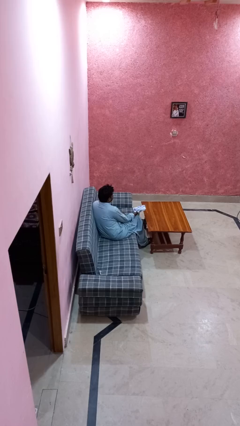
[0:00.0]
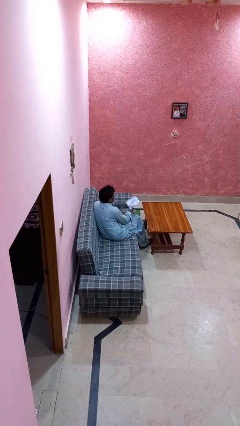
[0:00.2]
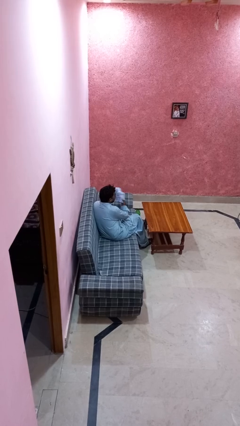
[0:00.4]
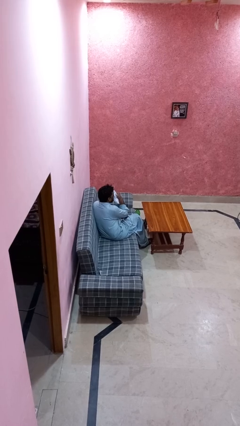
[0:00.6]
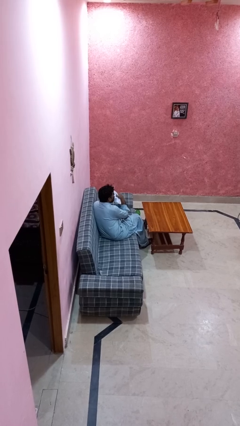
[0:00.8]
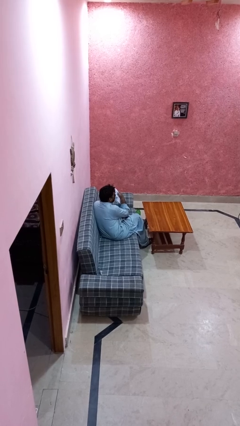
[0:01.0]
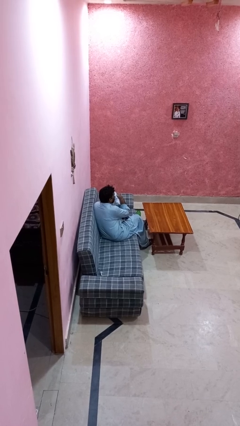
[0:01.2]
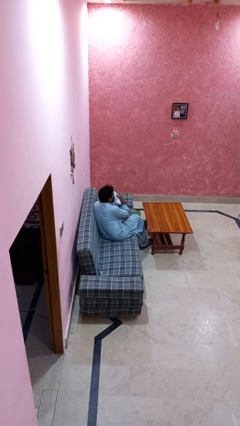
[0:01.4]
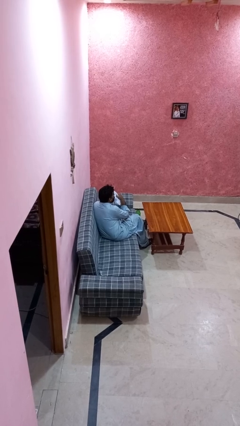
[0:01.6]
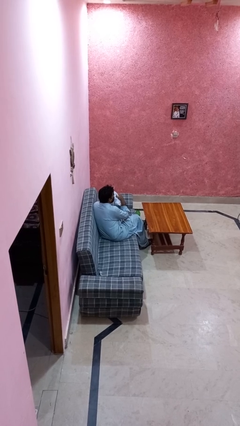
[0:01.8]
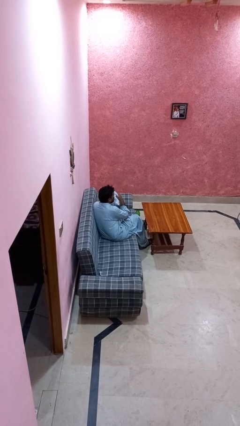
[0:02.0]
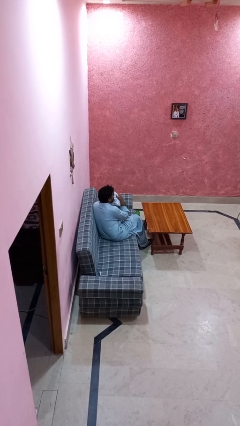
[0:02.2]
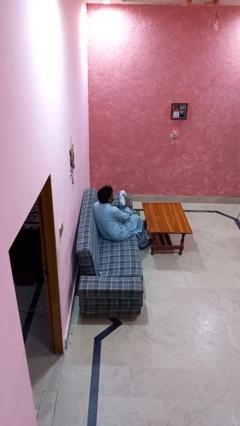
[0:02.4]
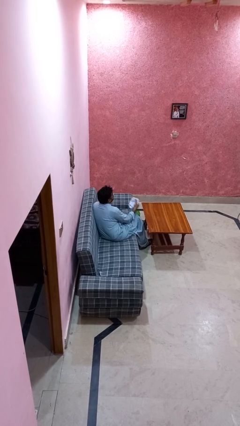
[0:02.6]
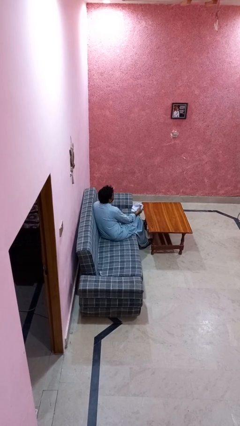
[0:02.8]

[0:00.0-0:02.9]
person blows nose

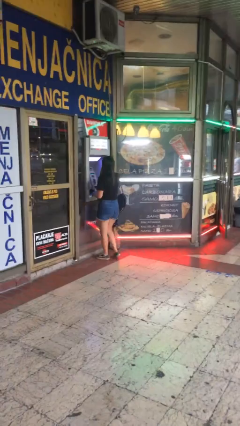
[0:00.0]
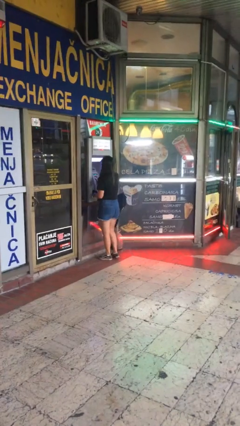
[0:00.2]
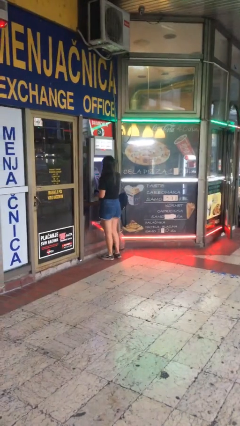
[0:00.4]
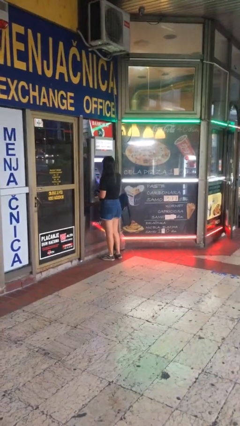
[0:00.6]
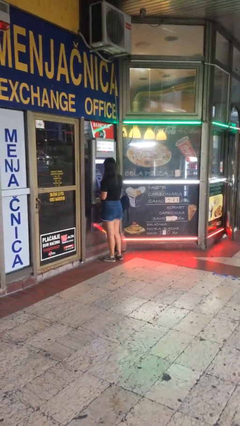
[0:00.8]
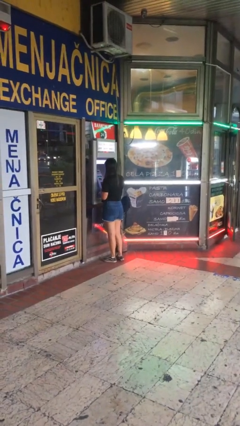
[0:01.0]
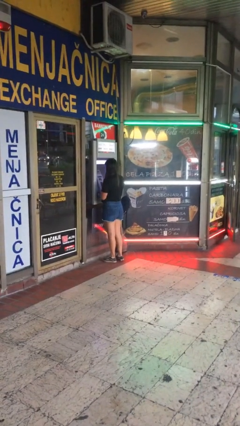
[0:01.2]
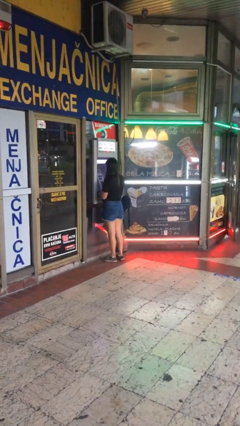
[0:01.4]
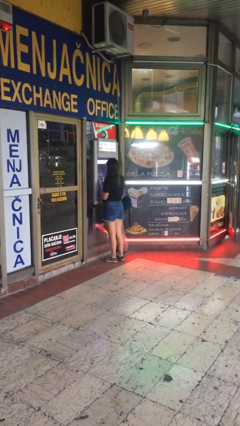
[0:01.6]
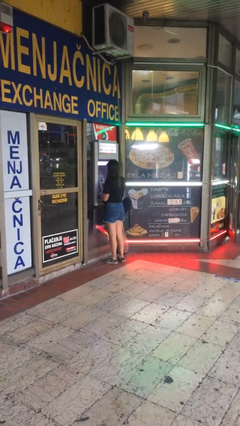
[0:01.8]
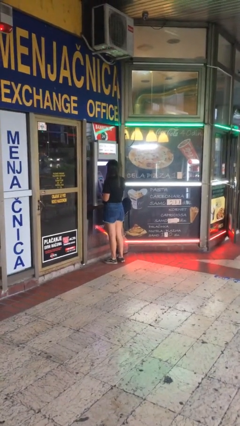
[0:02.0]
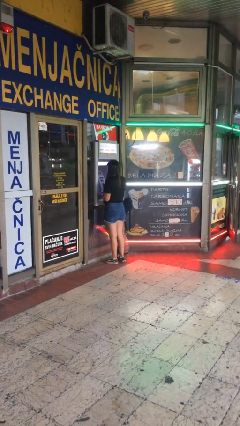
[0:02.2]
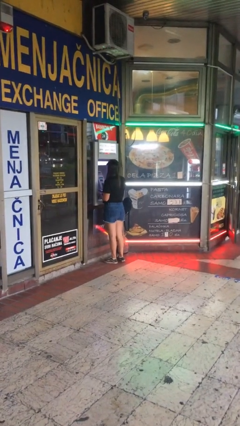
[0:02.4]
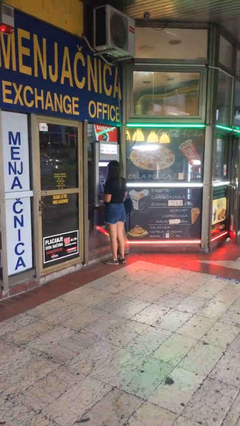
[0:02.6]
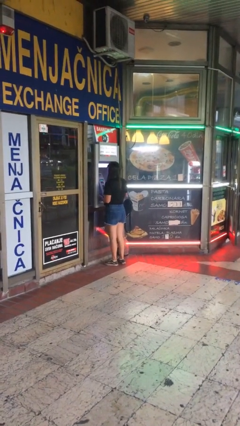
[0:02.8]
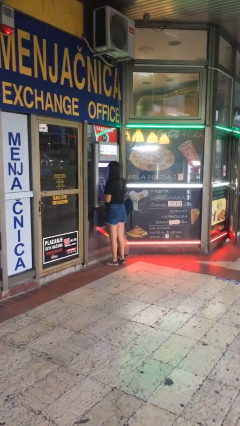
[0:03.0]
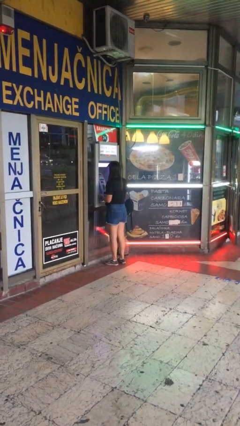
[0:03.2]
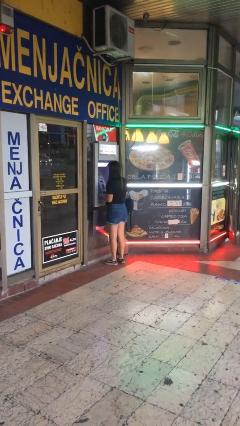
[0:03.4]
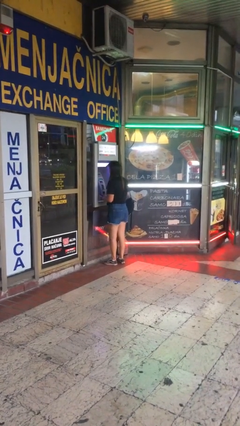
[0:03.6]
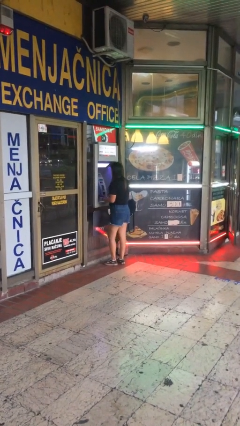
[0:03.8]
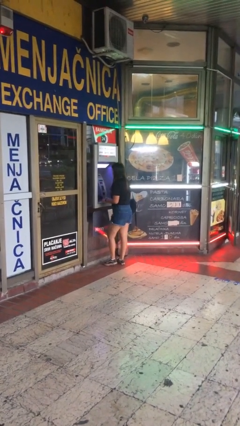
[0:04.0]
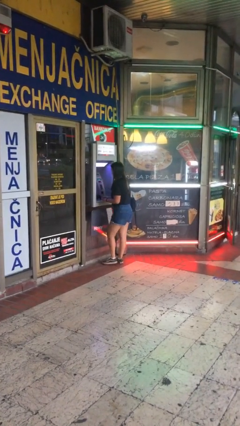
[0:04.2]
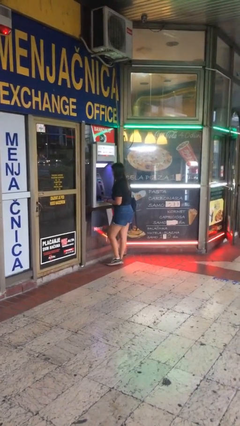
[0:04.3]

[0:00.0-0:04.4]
person purchases from machine

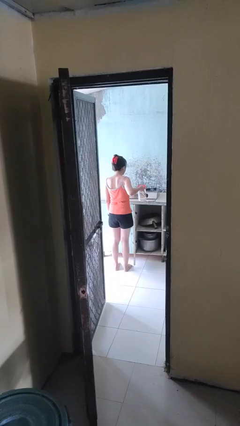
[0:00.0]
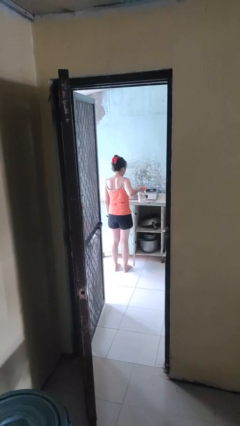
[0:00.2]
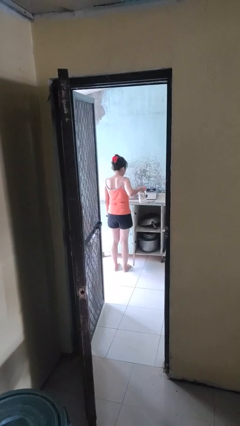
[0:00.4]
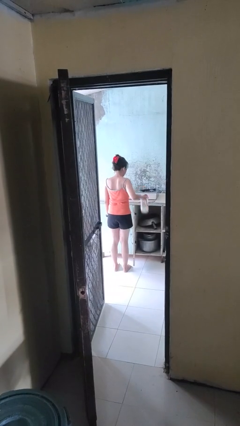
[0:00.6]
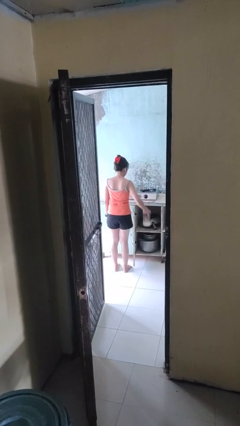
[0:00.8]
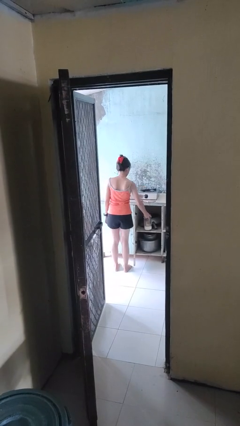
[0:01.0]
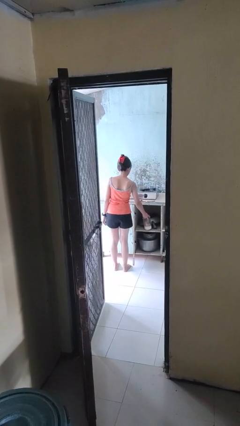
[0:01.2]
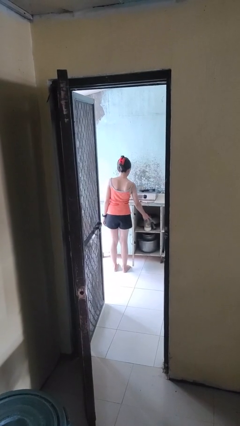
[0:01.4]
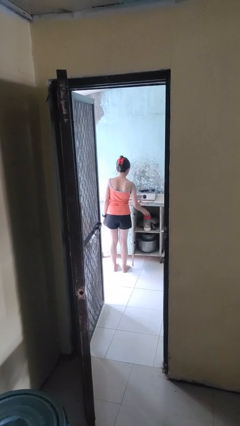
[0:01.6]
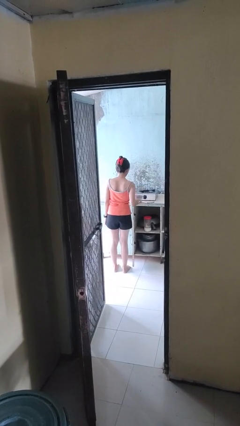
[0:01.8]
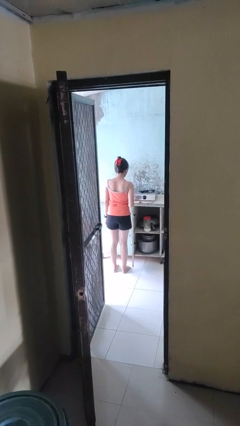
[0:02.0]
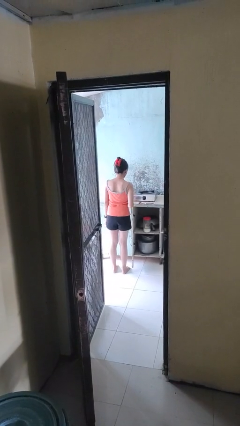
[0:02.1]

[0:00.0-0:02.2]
person puts down object into cabinet

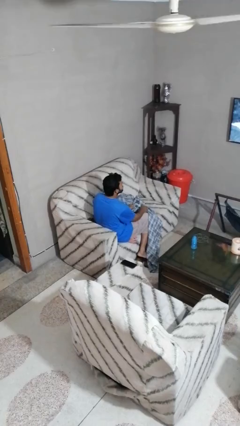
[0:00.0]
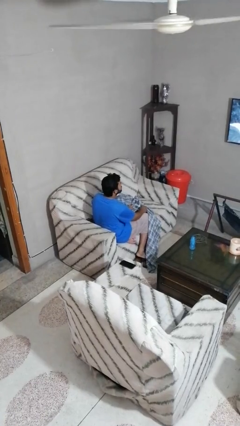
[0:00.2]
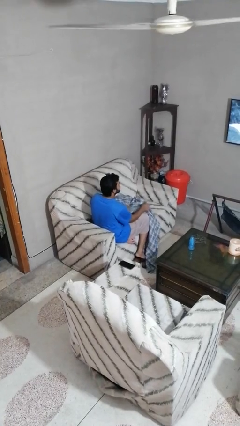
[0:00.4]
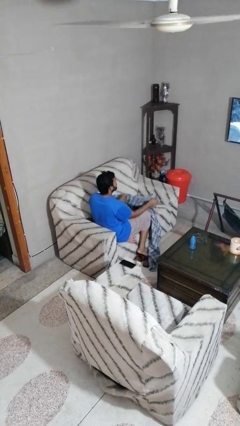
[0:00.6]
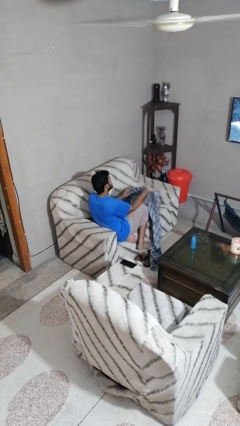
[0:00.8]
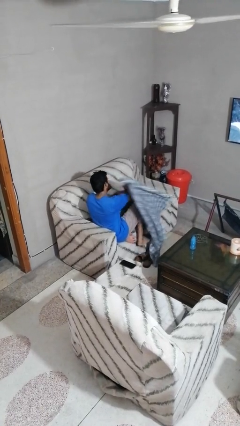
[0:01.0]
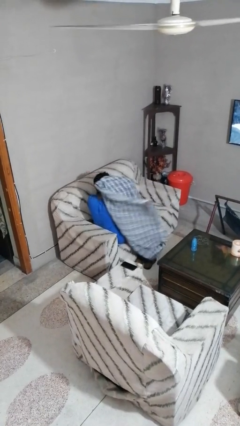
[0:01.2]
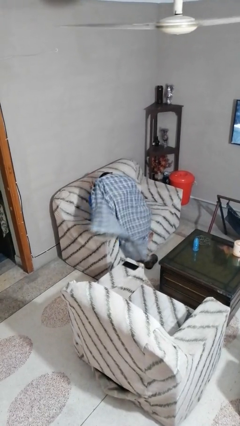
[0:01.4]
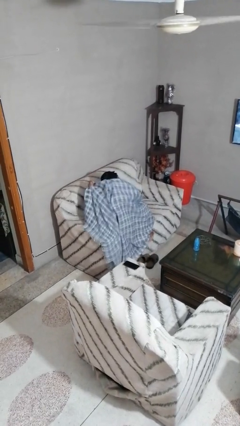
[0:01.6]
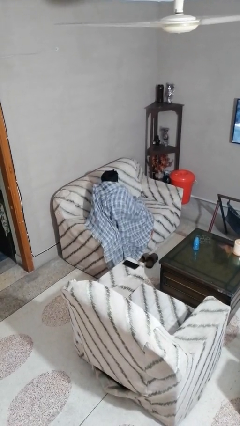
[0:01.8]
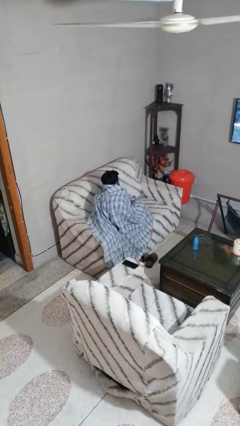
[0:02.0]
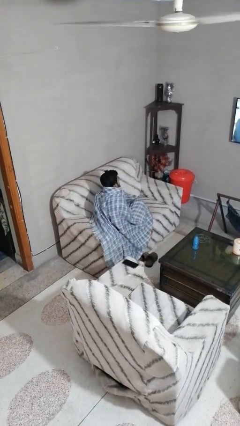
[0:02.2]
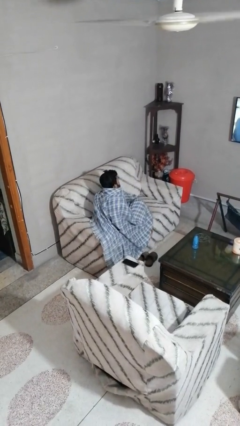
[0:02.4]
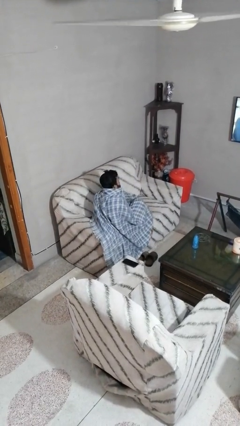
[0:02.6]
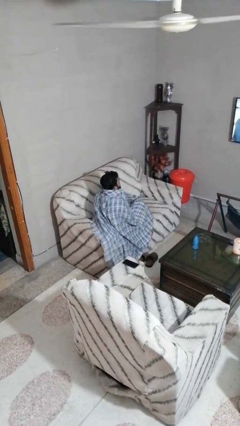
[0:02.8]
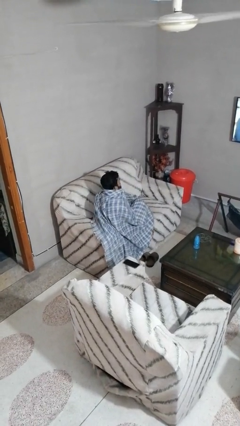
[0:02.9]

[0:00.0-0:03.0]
person covers with blanket

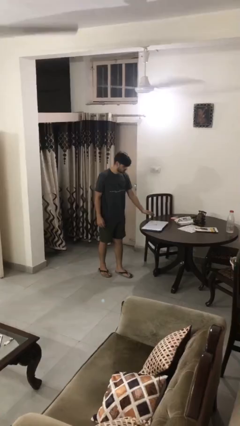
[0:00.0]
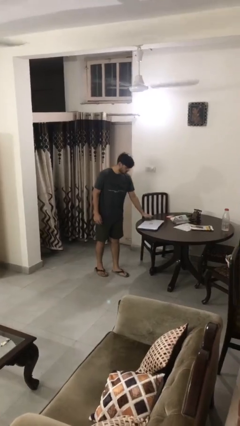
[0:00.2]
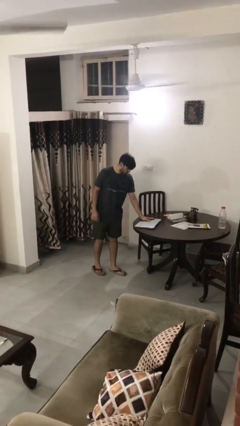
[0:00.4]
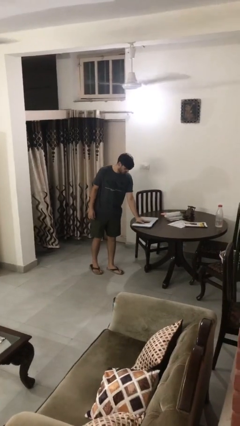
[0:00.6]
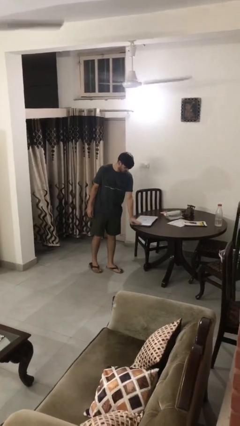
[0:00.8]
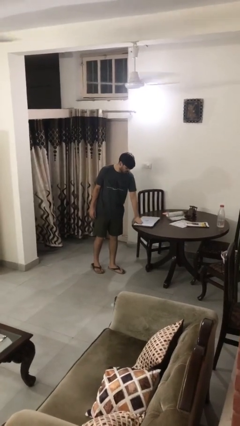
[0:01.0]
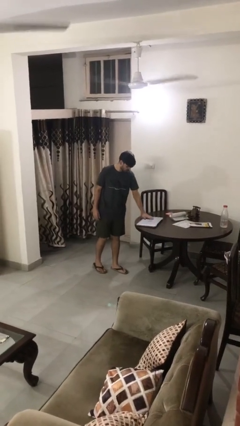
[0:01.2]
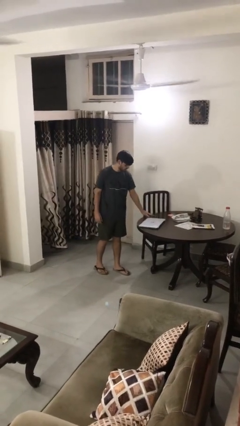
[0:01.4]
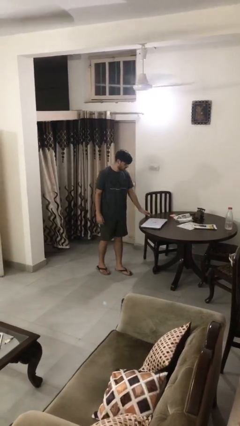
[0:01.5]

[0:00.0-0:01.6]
person waves hand over object

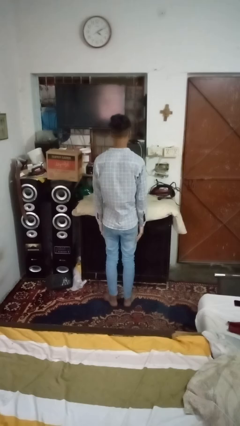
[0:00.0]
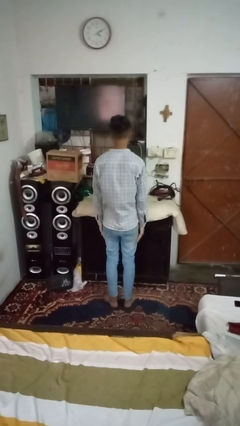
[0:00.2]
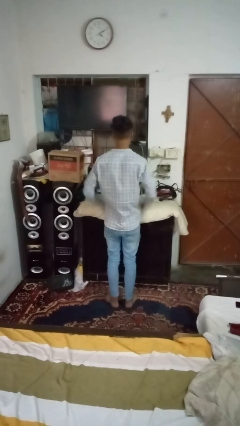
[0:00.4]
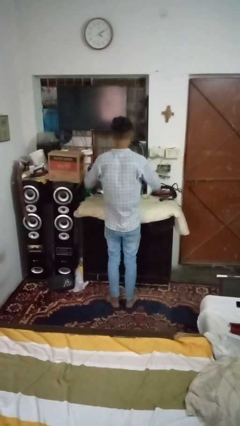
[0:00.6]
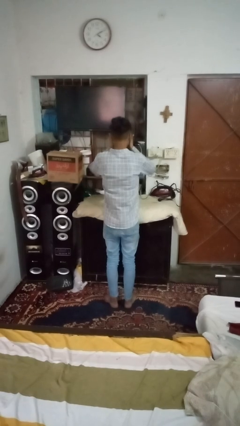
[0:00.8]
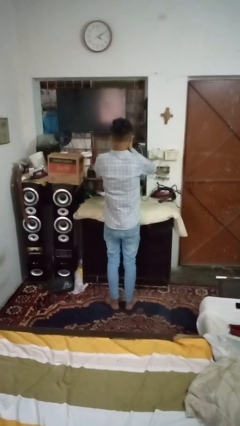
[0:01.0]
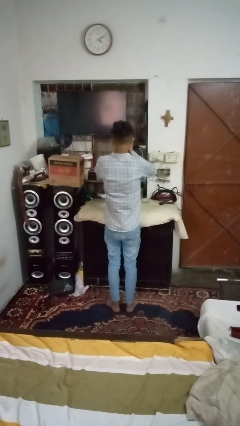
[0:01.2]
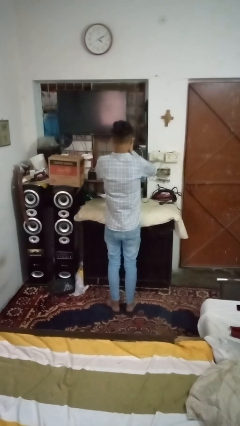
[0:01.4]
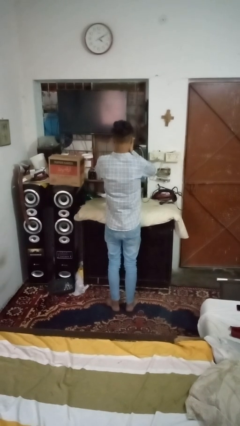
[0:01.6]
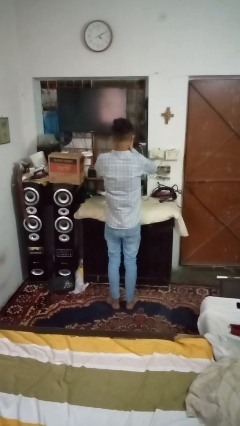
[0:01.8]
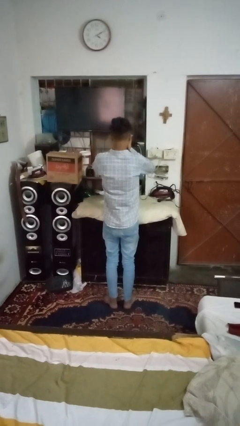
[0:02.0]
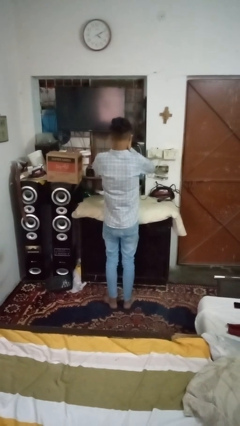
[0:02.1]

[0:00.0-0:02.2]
person covers face with hands

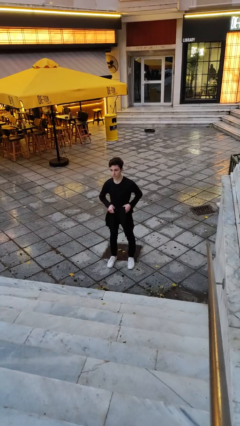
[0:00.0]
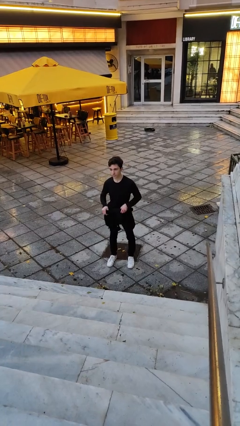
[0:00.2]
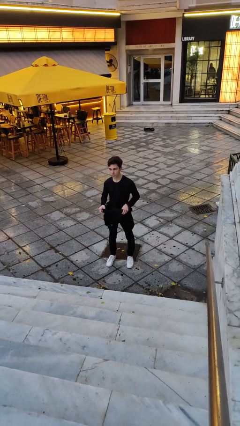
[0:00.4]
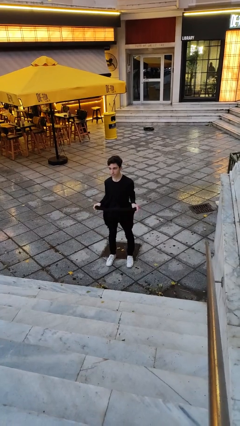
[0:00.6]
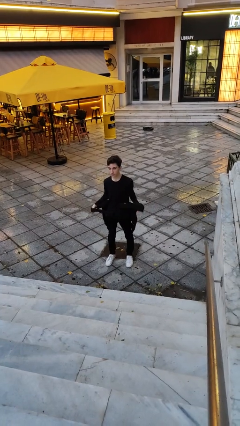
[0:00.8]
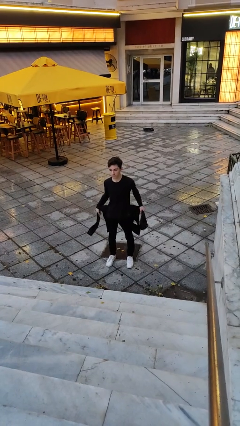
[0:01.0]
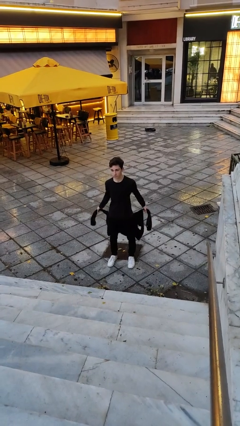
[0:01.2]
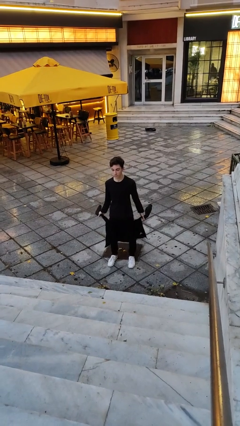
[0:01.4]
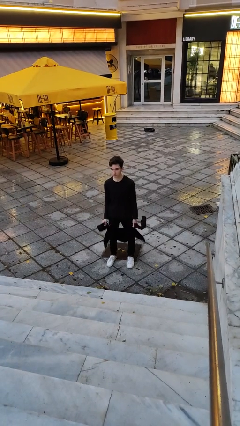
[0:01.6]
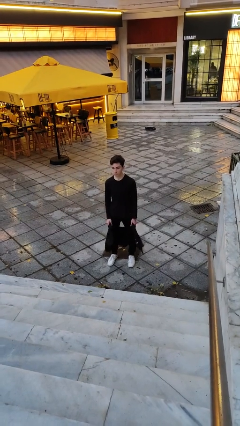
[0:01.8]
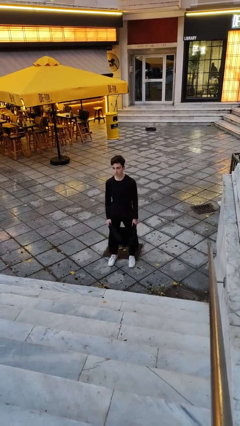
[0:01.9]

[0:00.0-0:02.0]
person unties jacket around waist
